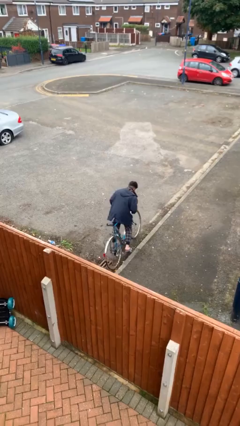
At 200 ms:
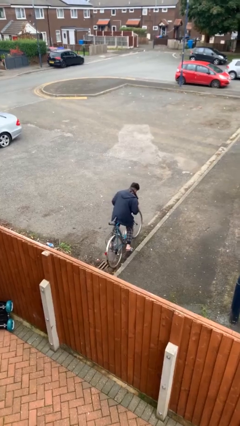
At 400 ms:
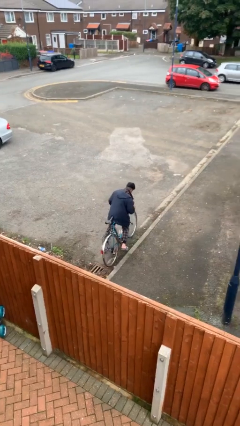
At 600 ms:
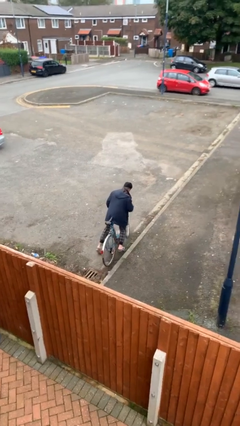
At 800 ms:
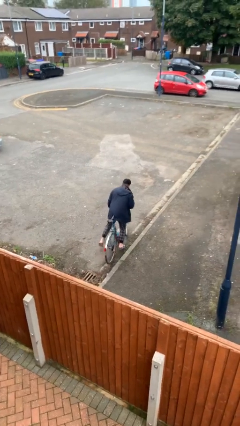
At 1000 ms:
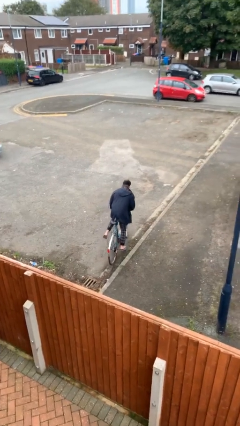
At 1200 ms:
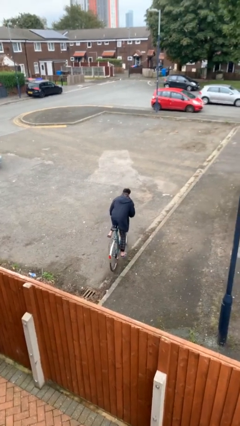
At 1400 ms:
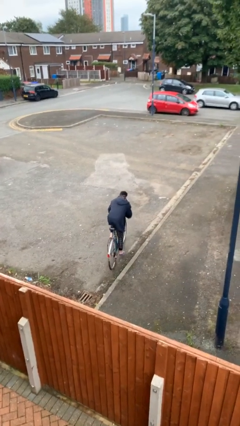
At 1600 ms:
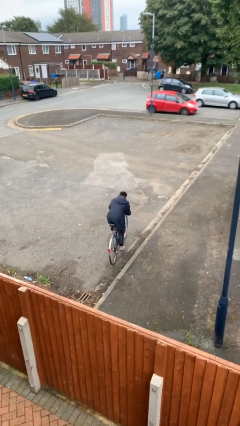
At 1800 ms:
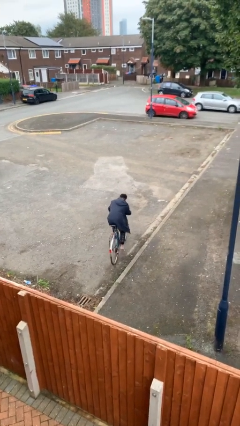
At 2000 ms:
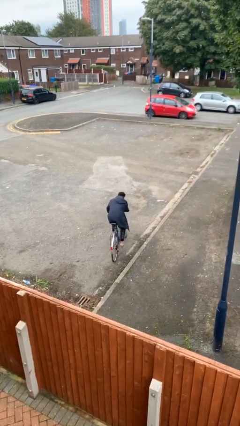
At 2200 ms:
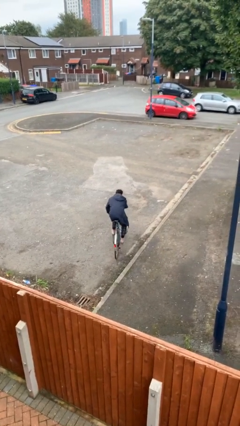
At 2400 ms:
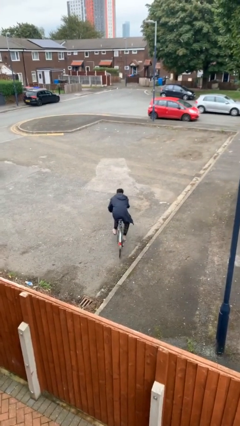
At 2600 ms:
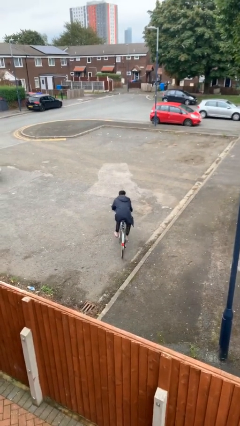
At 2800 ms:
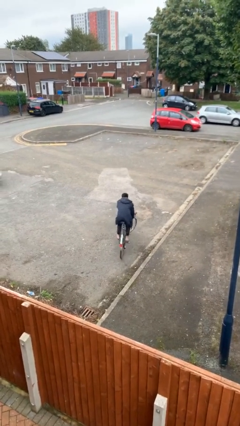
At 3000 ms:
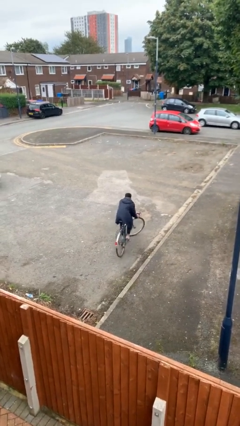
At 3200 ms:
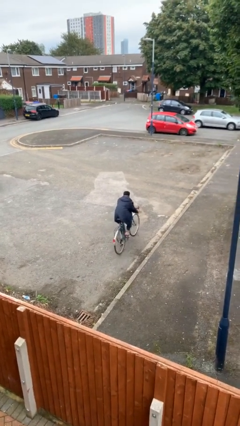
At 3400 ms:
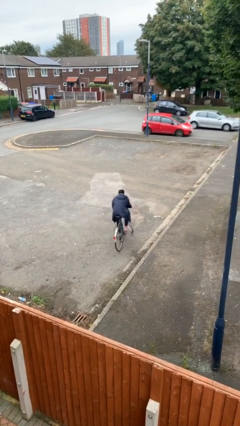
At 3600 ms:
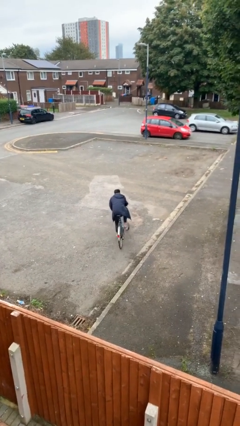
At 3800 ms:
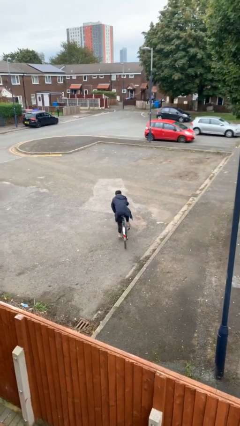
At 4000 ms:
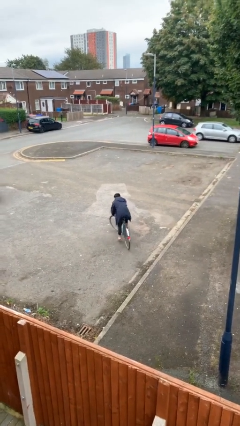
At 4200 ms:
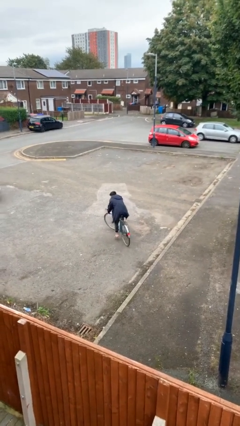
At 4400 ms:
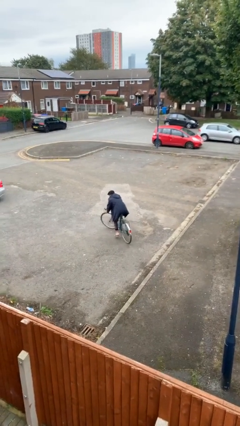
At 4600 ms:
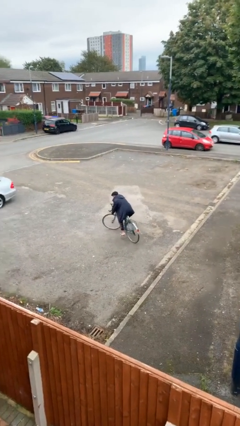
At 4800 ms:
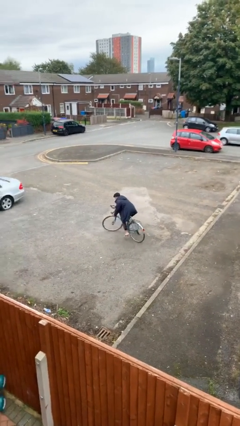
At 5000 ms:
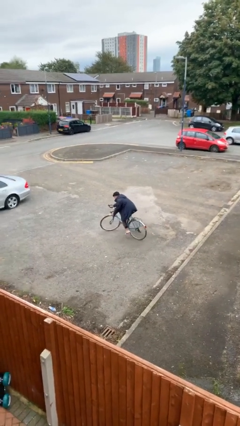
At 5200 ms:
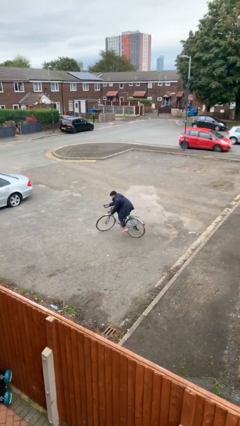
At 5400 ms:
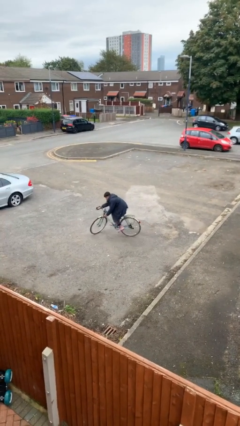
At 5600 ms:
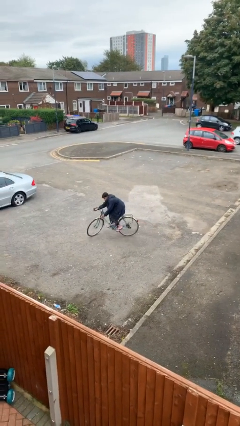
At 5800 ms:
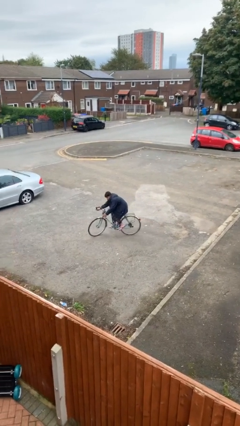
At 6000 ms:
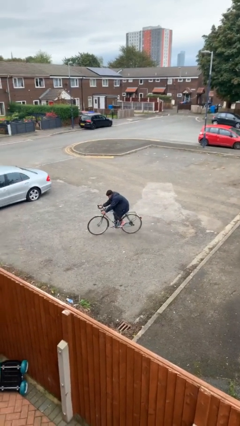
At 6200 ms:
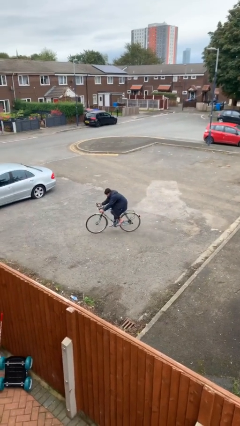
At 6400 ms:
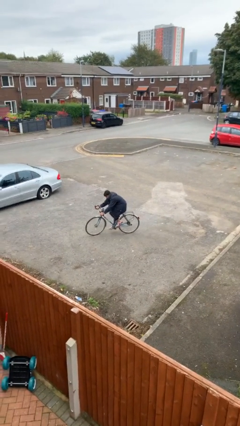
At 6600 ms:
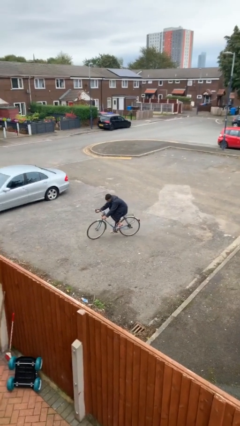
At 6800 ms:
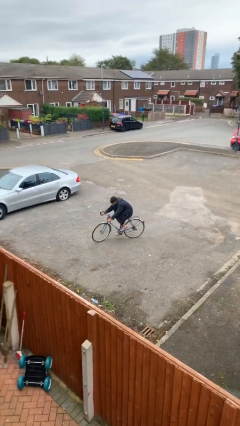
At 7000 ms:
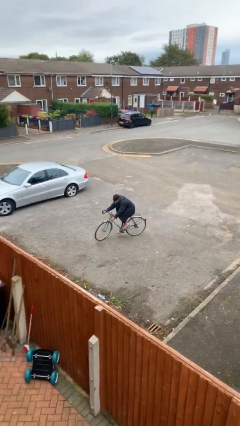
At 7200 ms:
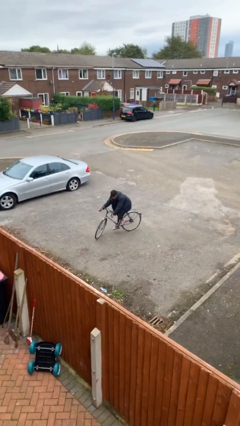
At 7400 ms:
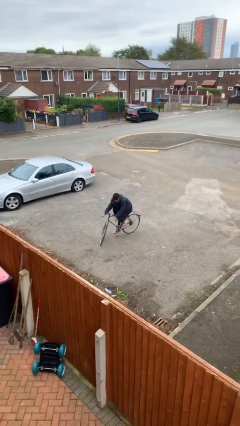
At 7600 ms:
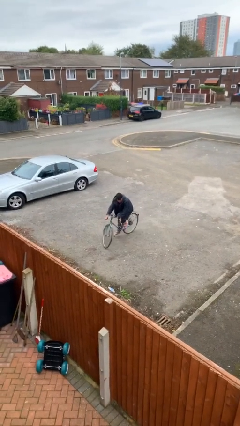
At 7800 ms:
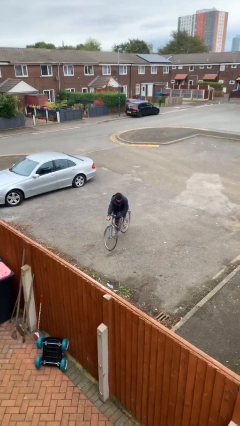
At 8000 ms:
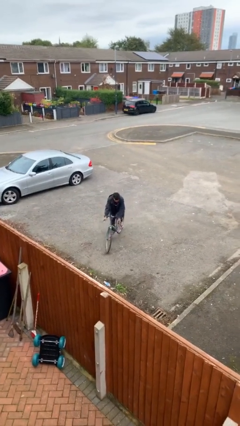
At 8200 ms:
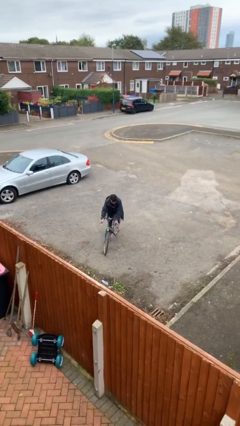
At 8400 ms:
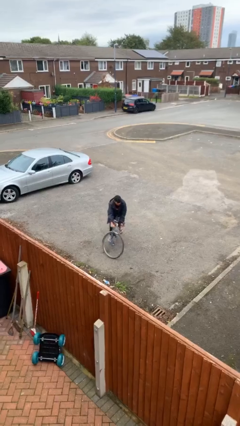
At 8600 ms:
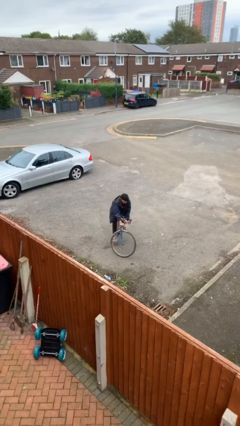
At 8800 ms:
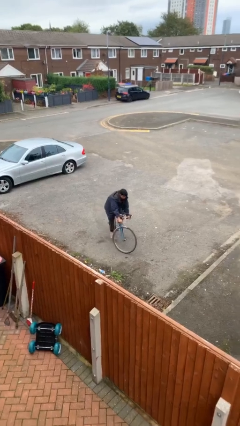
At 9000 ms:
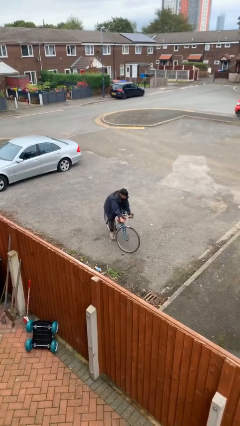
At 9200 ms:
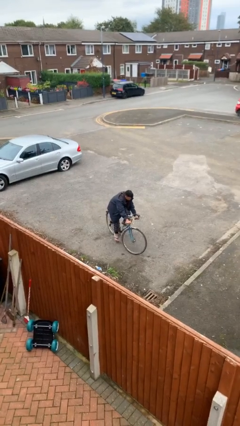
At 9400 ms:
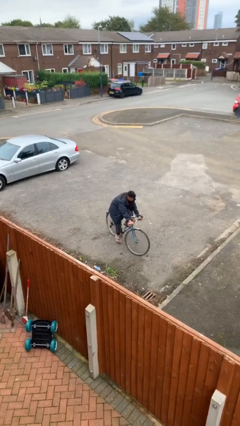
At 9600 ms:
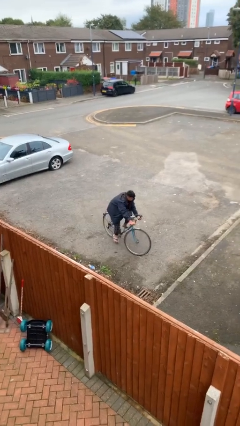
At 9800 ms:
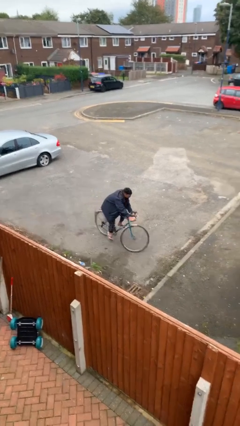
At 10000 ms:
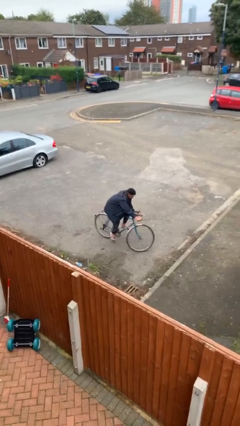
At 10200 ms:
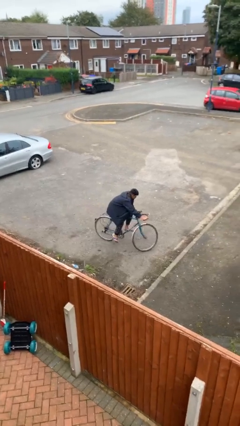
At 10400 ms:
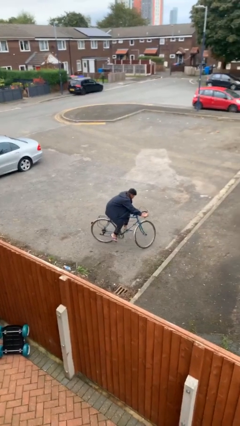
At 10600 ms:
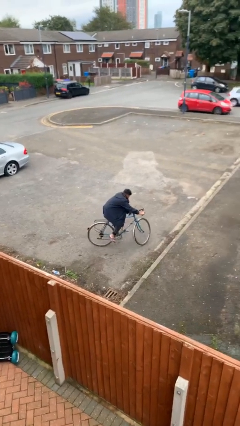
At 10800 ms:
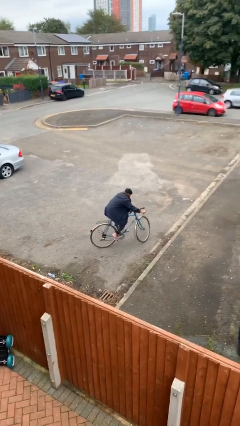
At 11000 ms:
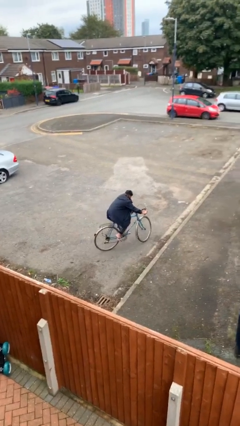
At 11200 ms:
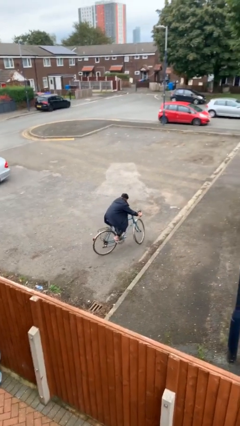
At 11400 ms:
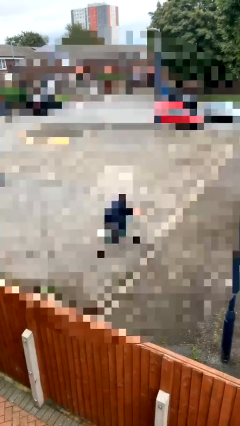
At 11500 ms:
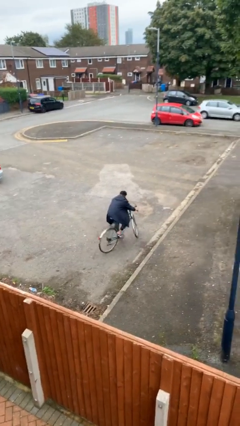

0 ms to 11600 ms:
person rides bicycle

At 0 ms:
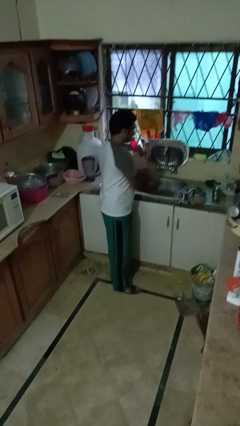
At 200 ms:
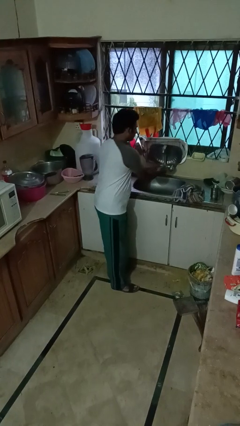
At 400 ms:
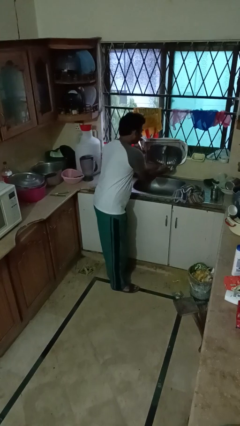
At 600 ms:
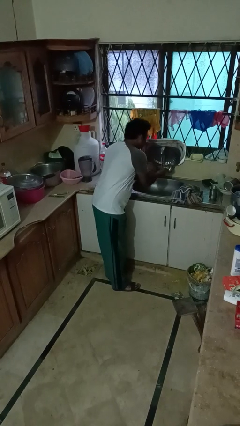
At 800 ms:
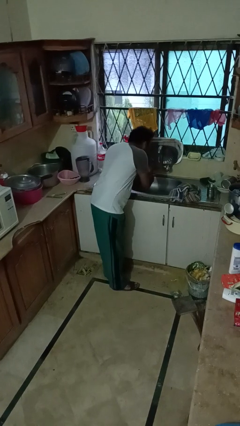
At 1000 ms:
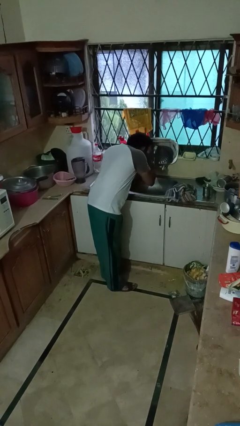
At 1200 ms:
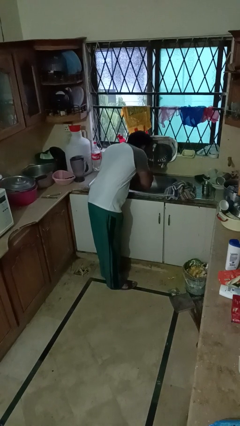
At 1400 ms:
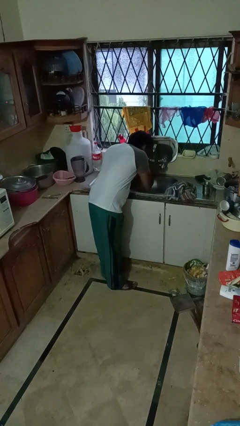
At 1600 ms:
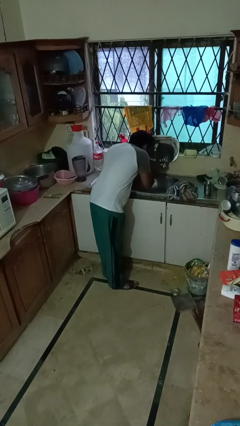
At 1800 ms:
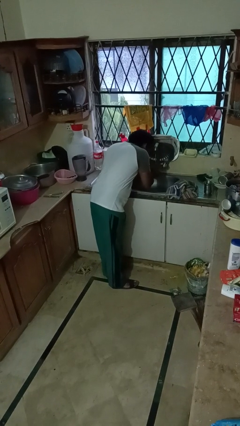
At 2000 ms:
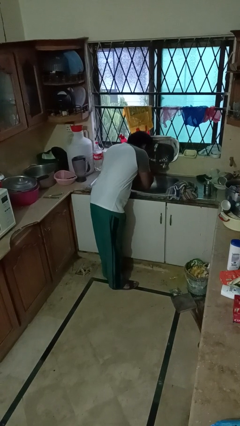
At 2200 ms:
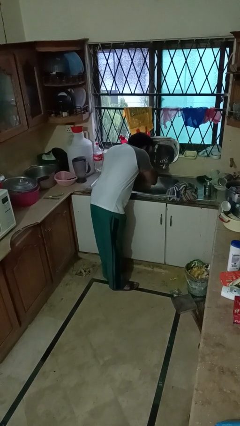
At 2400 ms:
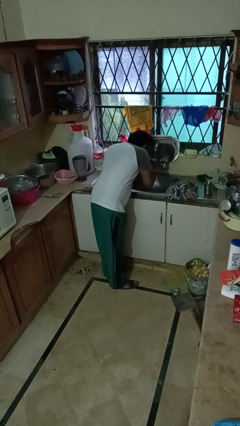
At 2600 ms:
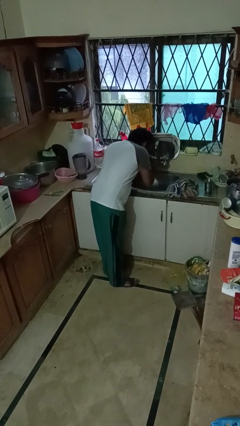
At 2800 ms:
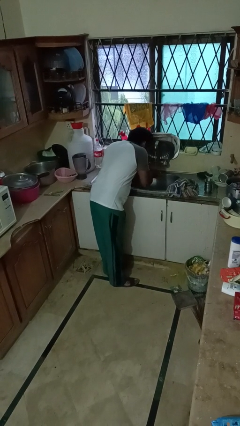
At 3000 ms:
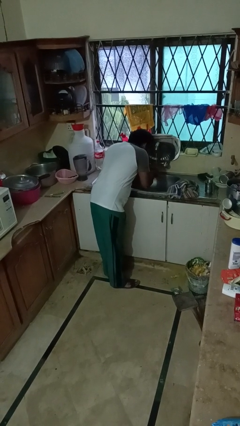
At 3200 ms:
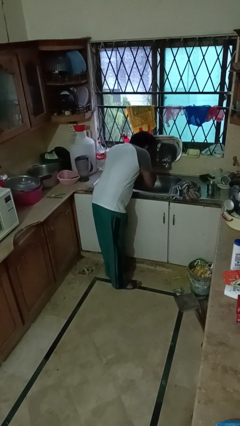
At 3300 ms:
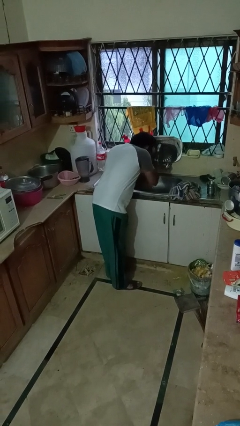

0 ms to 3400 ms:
person washes face

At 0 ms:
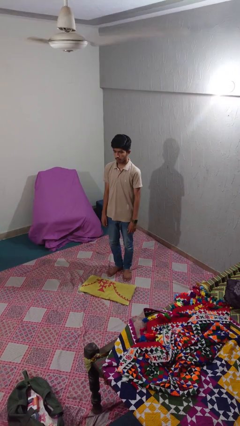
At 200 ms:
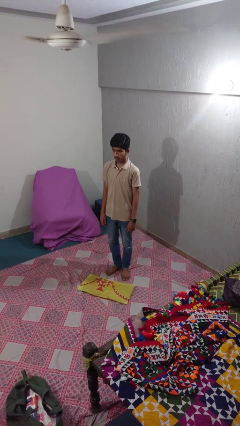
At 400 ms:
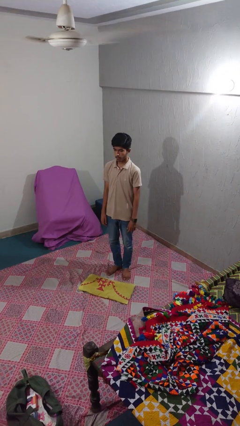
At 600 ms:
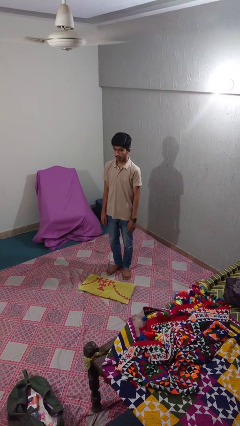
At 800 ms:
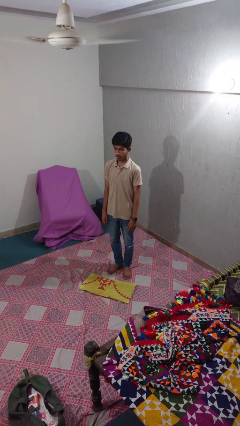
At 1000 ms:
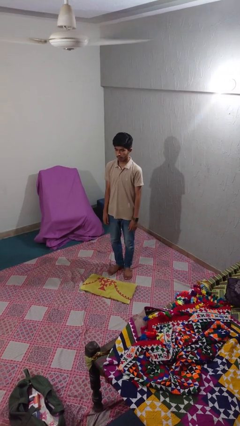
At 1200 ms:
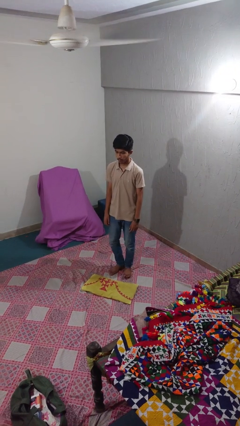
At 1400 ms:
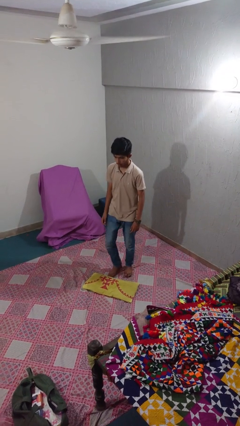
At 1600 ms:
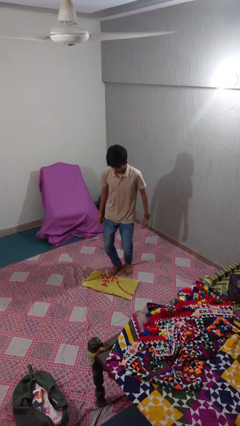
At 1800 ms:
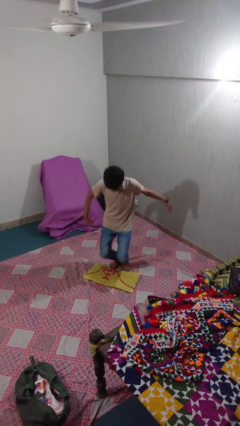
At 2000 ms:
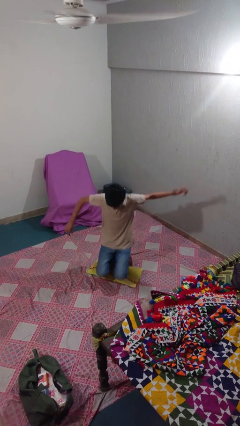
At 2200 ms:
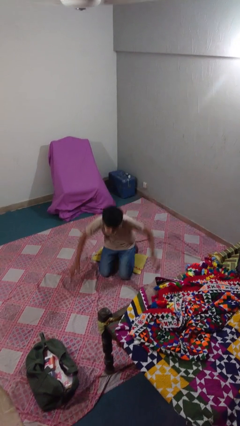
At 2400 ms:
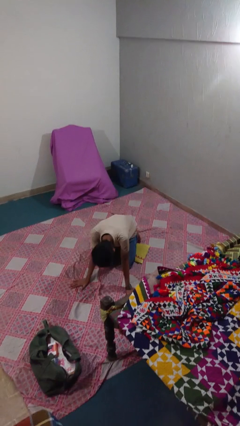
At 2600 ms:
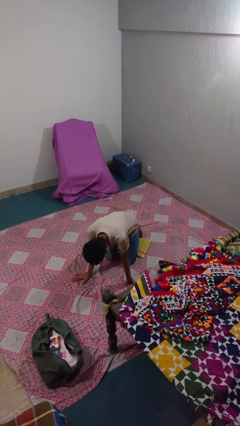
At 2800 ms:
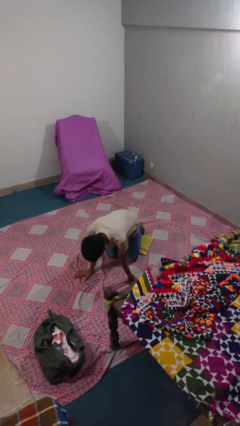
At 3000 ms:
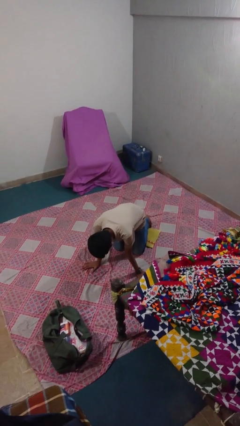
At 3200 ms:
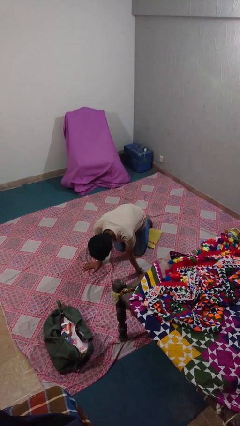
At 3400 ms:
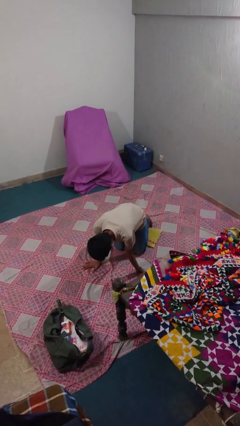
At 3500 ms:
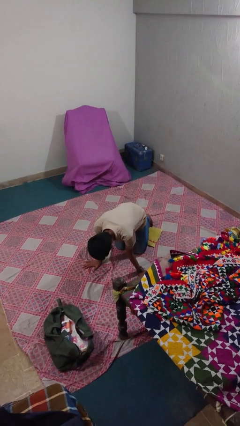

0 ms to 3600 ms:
person trips on object on floor
